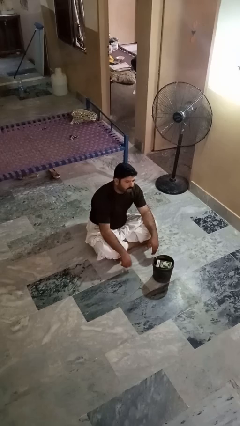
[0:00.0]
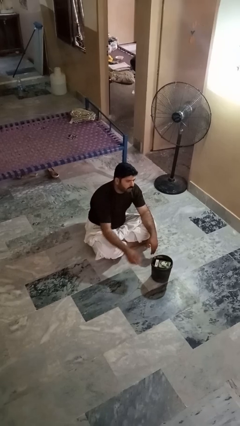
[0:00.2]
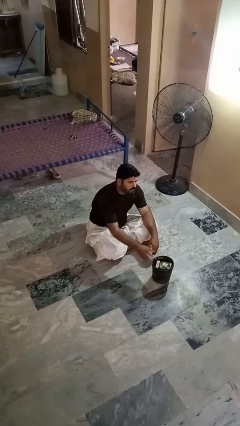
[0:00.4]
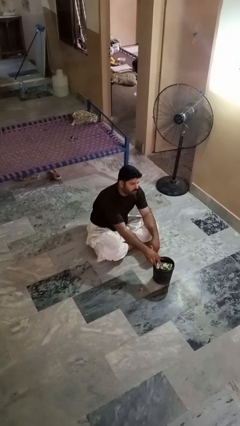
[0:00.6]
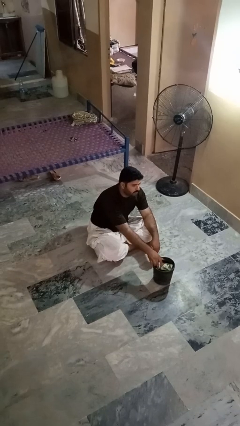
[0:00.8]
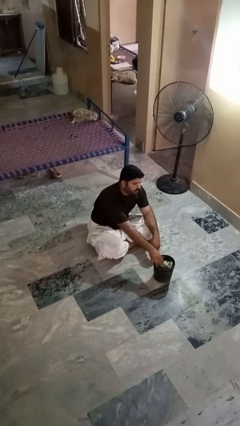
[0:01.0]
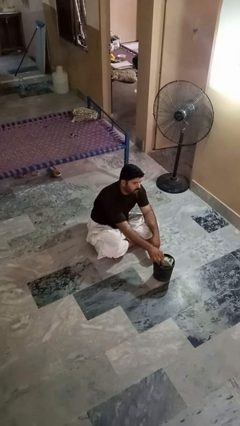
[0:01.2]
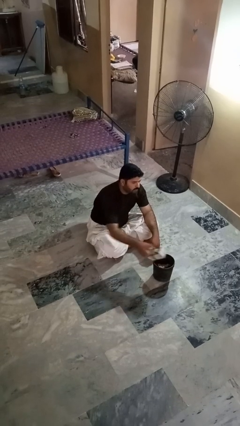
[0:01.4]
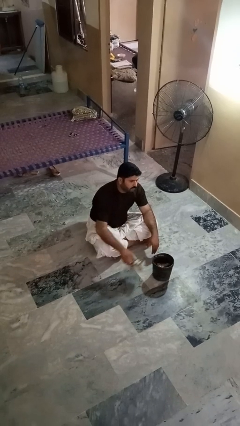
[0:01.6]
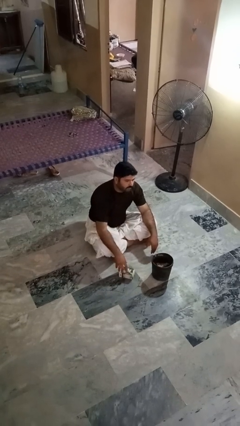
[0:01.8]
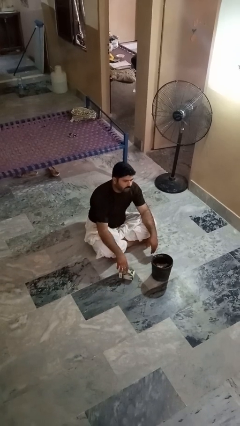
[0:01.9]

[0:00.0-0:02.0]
person takes object from basket

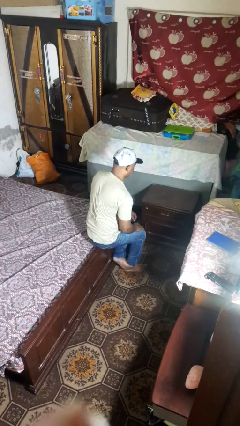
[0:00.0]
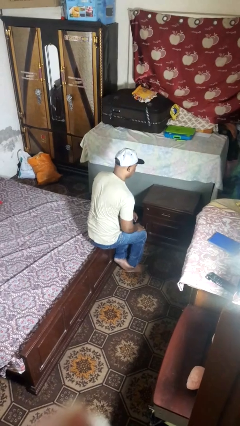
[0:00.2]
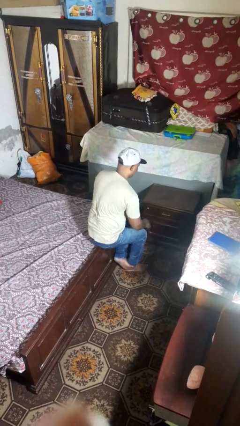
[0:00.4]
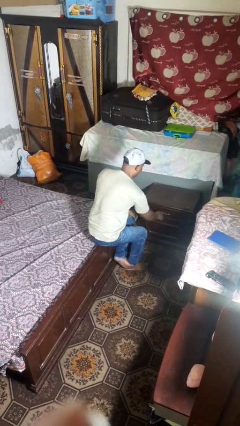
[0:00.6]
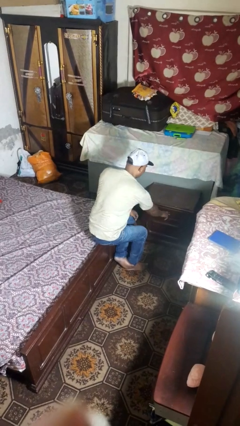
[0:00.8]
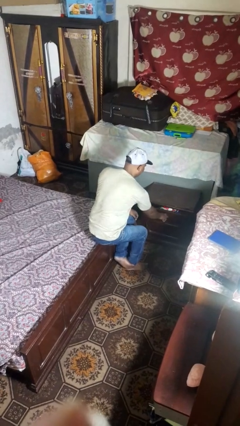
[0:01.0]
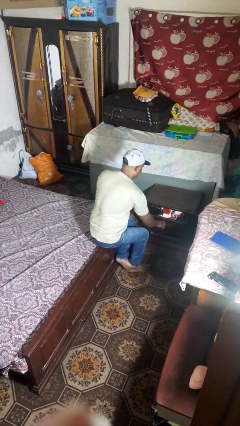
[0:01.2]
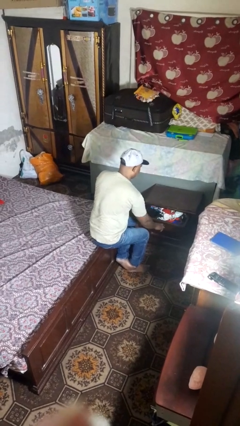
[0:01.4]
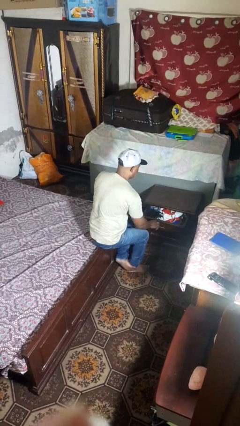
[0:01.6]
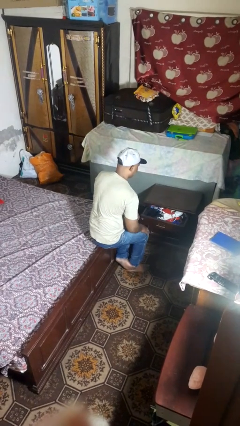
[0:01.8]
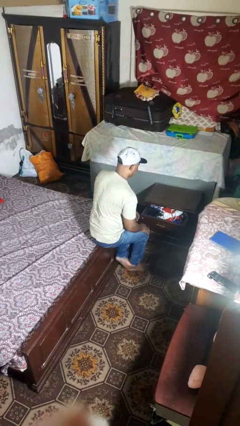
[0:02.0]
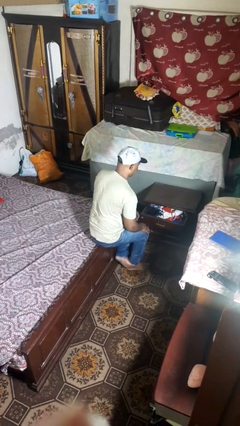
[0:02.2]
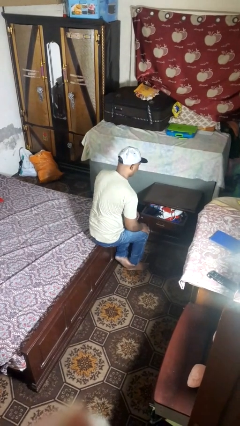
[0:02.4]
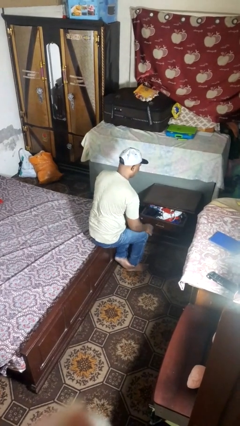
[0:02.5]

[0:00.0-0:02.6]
person opens dresser drawer

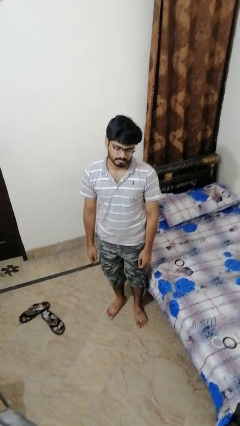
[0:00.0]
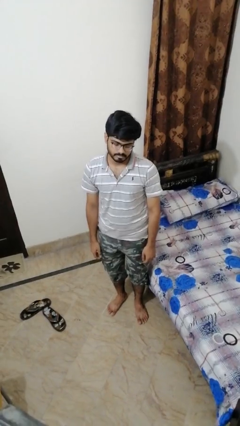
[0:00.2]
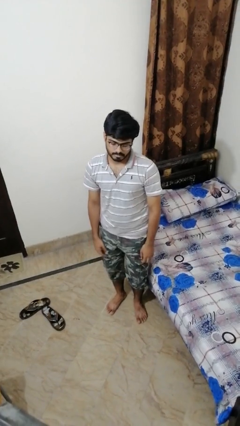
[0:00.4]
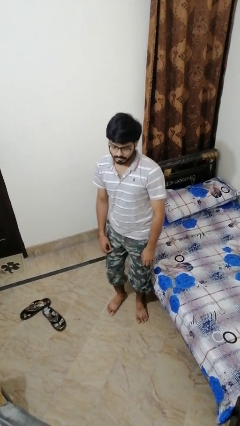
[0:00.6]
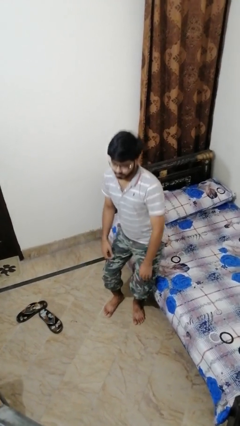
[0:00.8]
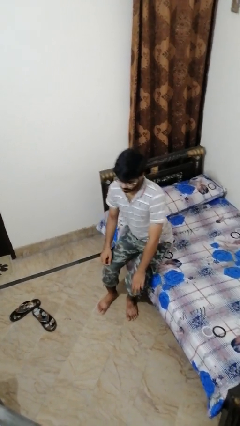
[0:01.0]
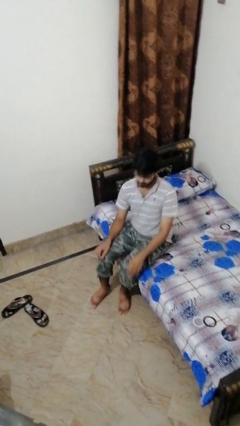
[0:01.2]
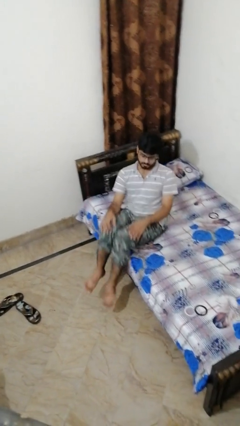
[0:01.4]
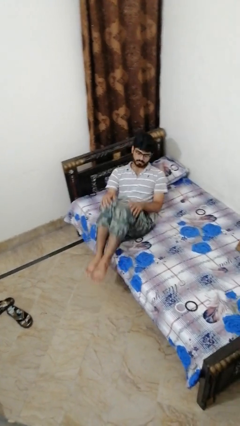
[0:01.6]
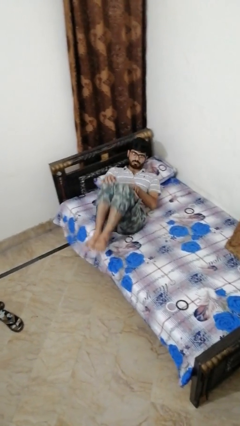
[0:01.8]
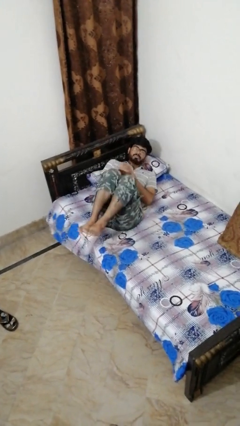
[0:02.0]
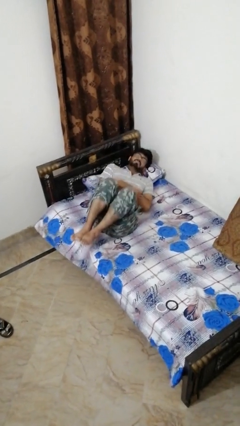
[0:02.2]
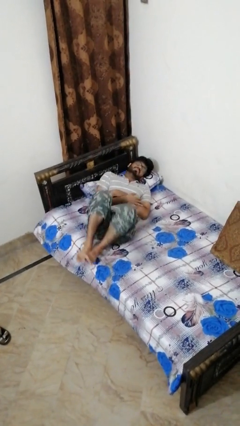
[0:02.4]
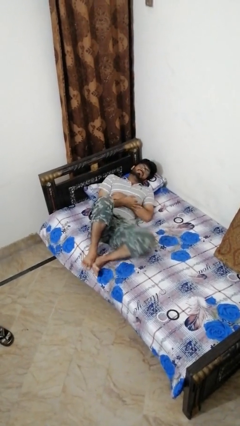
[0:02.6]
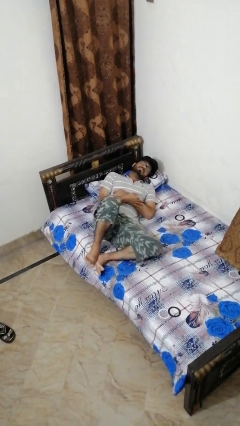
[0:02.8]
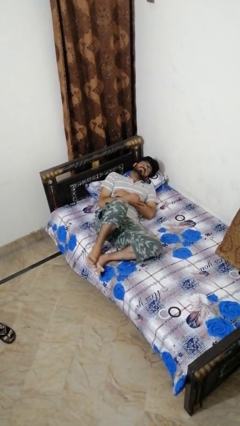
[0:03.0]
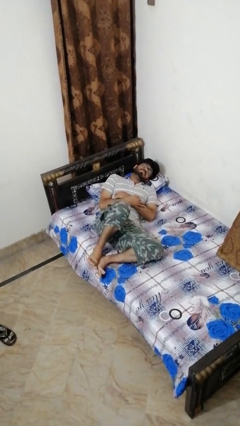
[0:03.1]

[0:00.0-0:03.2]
person lies down on bed

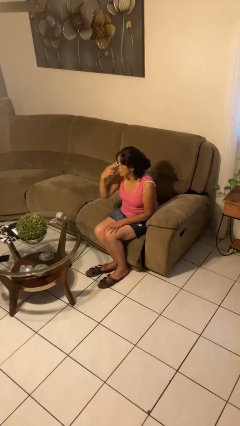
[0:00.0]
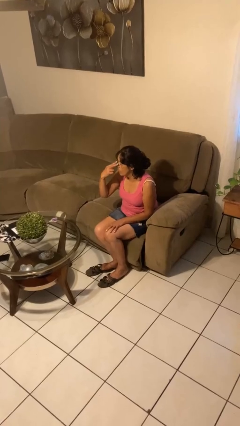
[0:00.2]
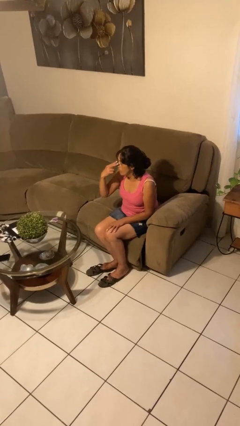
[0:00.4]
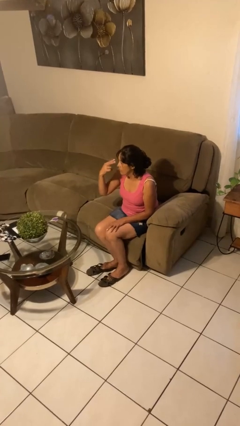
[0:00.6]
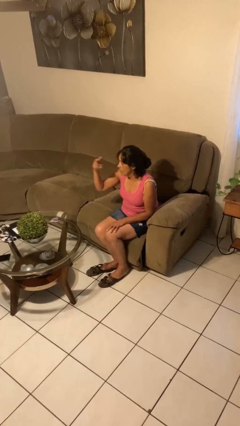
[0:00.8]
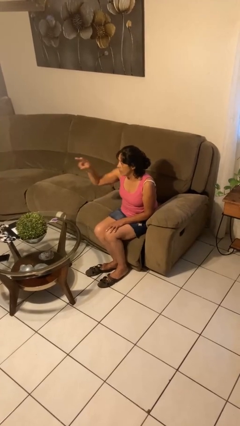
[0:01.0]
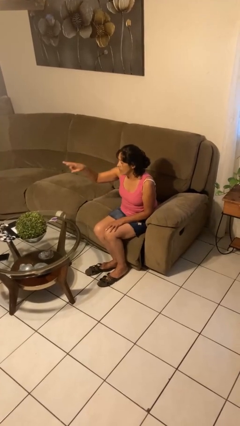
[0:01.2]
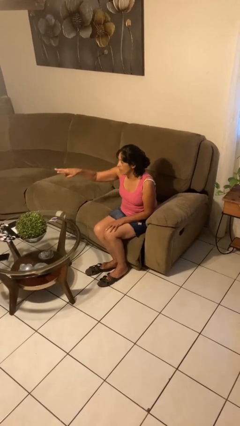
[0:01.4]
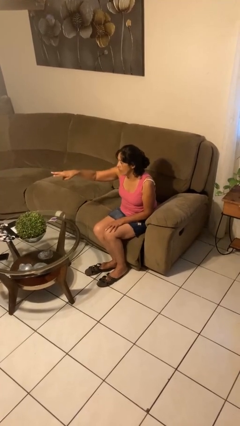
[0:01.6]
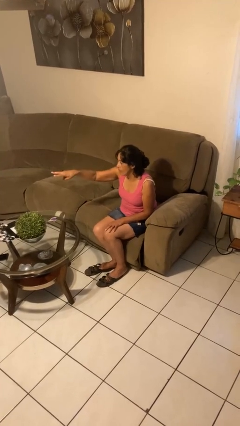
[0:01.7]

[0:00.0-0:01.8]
person gestures watch closely

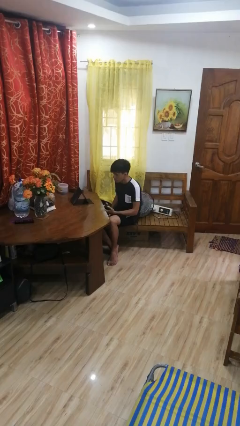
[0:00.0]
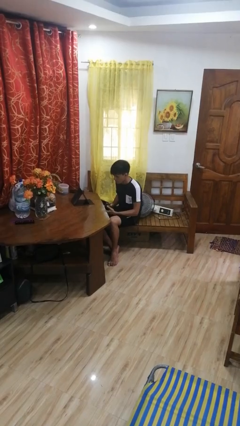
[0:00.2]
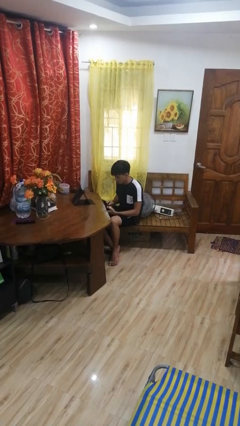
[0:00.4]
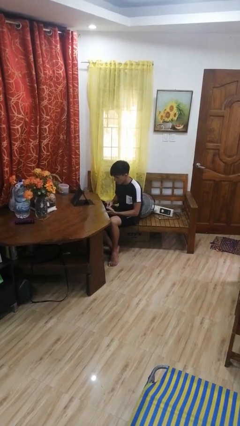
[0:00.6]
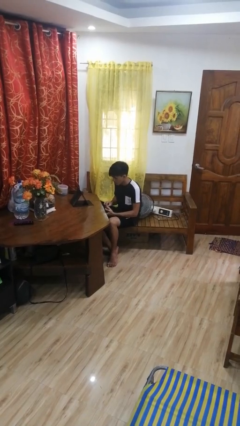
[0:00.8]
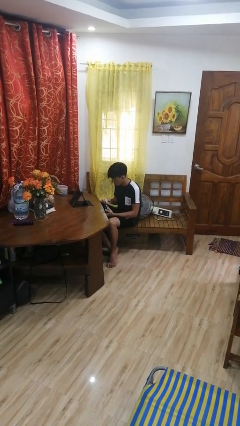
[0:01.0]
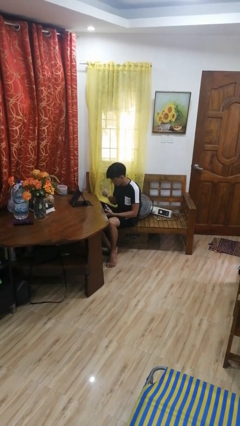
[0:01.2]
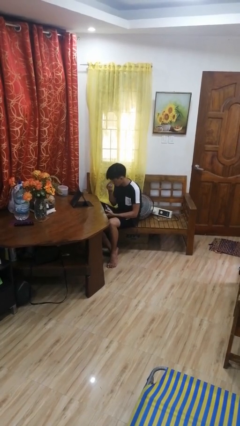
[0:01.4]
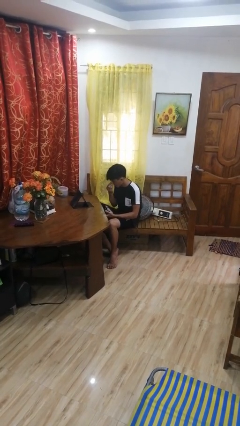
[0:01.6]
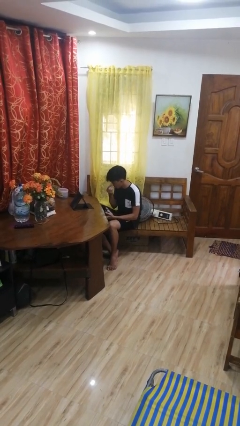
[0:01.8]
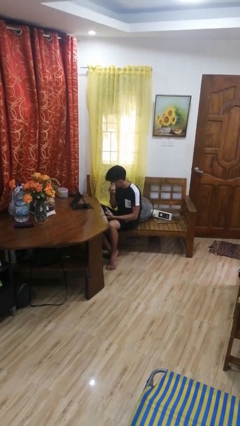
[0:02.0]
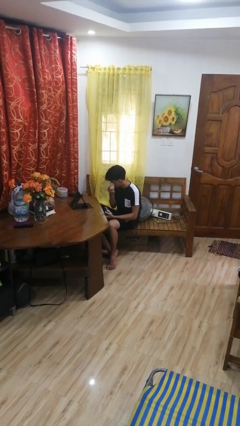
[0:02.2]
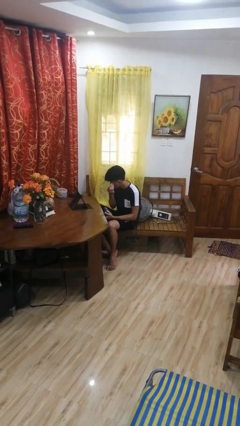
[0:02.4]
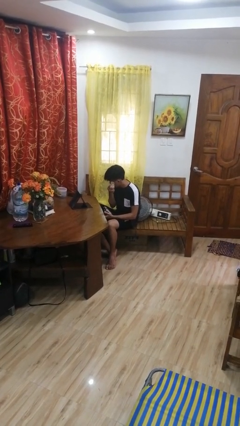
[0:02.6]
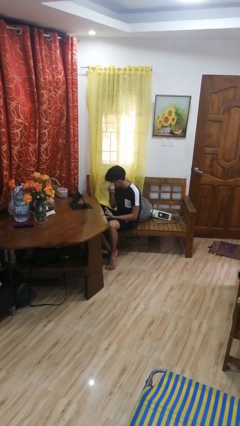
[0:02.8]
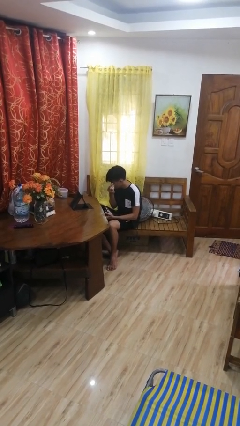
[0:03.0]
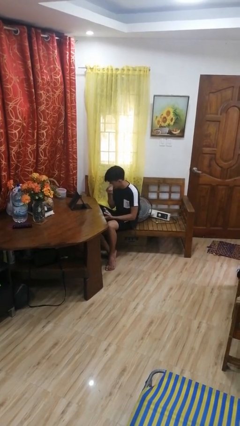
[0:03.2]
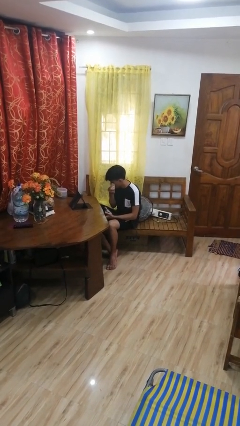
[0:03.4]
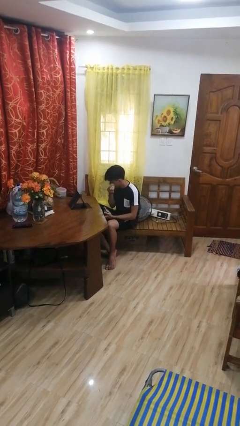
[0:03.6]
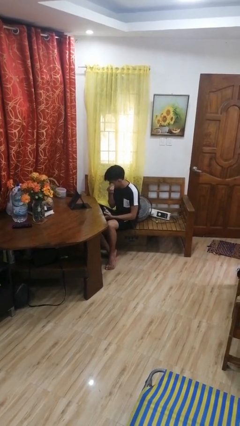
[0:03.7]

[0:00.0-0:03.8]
person applies eye makeup

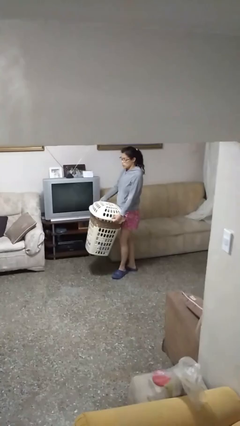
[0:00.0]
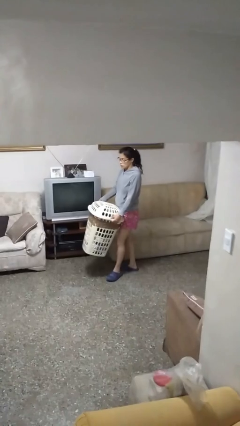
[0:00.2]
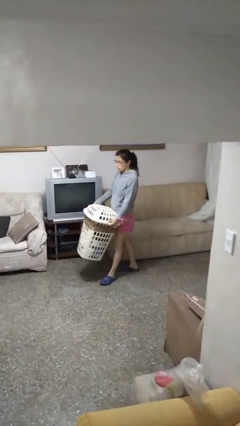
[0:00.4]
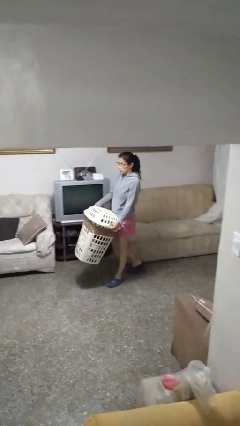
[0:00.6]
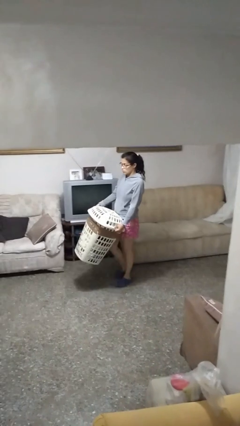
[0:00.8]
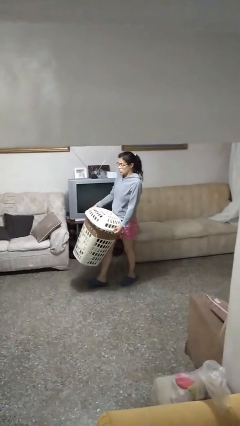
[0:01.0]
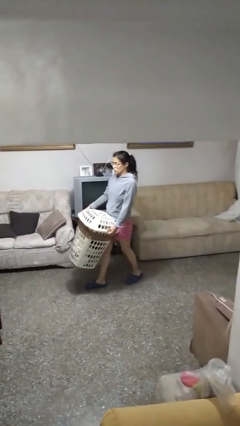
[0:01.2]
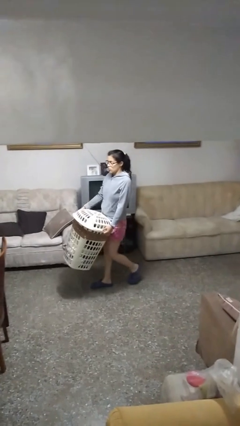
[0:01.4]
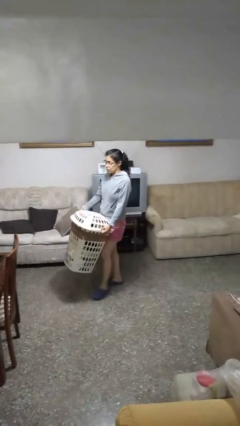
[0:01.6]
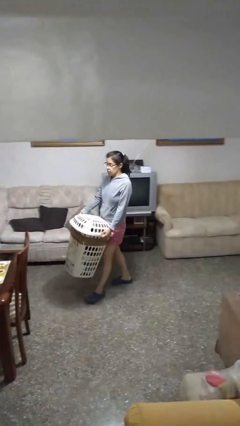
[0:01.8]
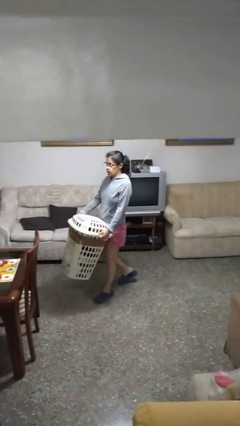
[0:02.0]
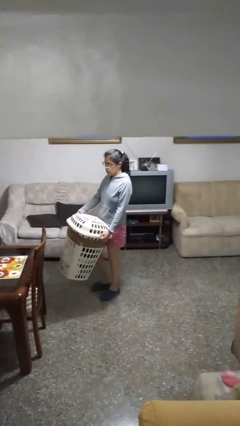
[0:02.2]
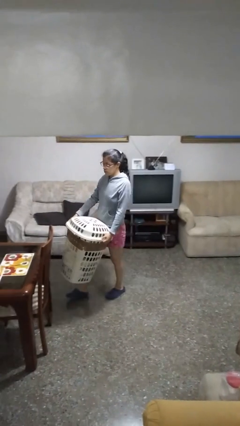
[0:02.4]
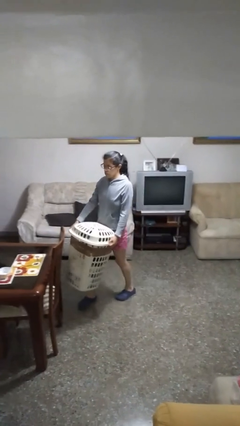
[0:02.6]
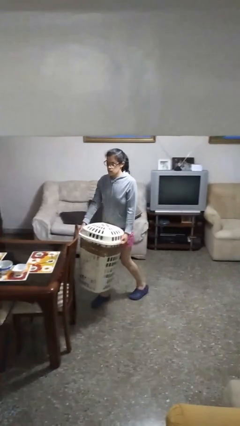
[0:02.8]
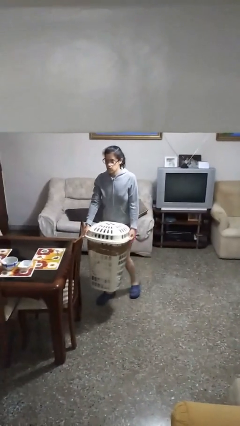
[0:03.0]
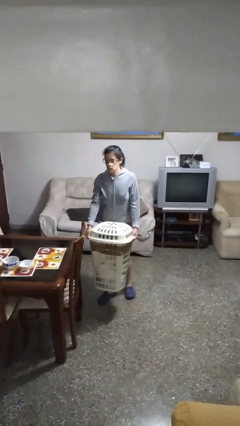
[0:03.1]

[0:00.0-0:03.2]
person carries laundry basket

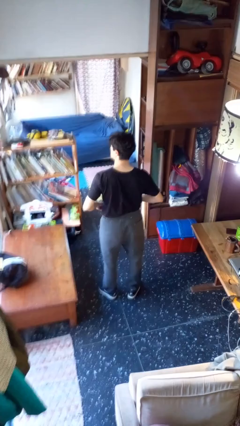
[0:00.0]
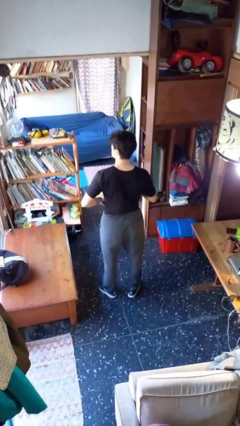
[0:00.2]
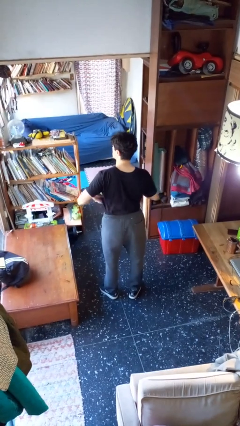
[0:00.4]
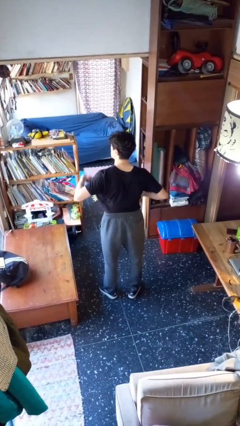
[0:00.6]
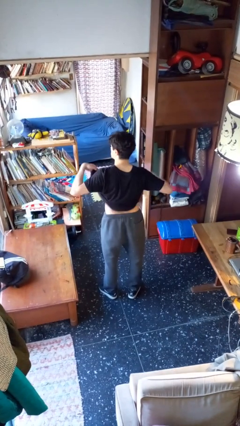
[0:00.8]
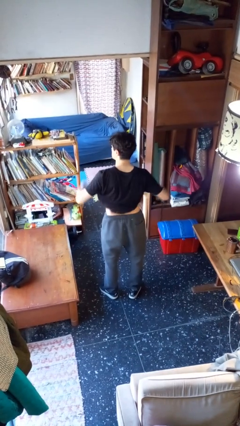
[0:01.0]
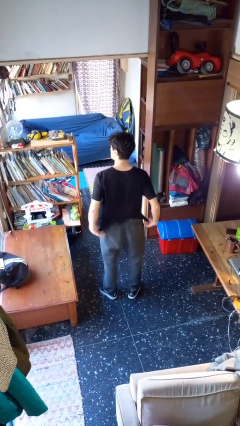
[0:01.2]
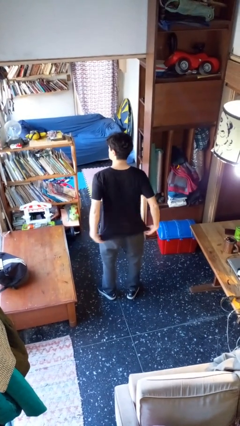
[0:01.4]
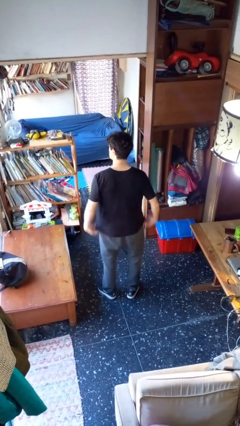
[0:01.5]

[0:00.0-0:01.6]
person untucks shirt
